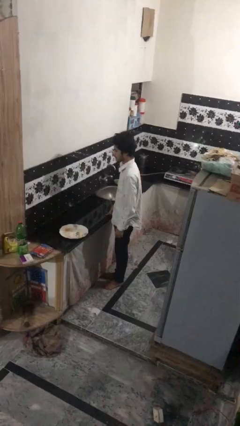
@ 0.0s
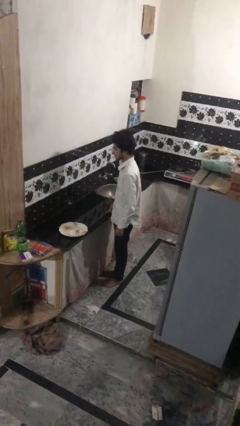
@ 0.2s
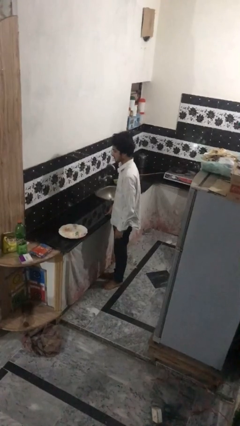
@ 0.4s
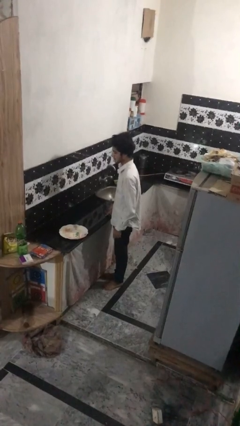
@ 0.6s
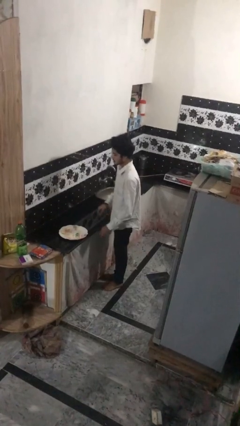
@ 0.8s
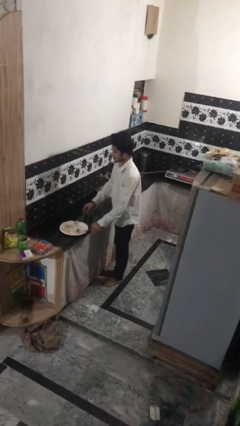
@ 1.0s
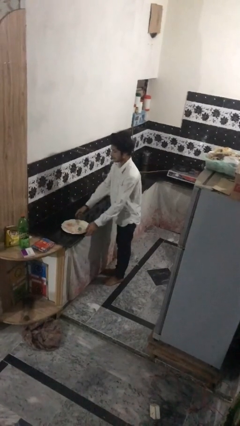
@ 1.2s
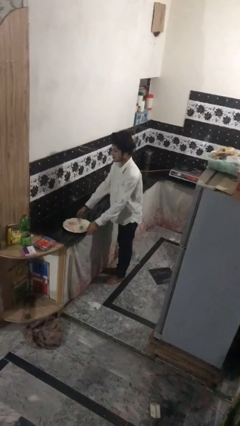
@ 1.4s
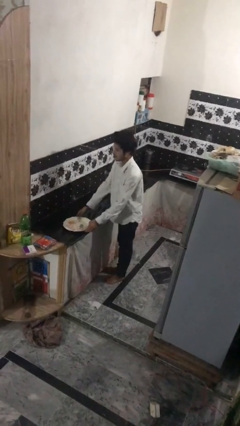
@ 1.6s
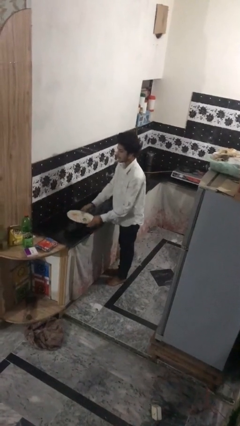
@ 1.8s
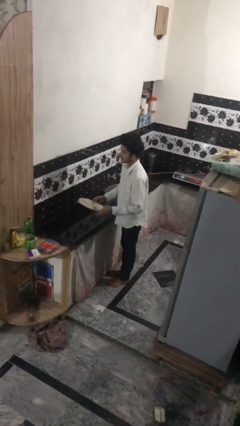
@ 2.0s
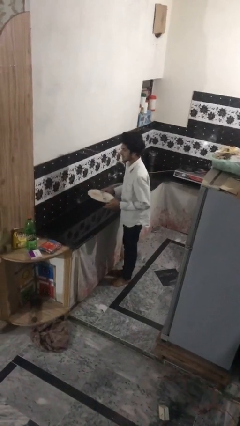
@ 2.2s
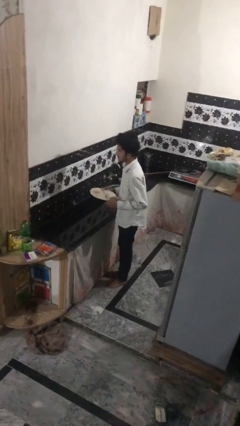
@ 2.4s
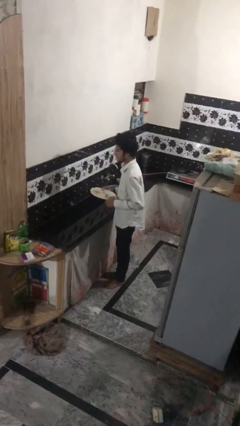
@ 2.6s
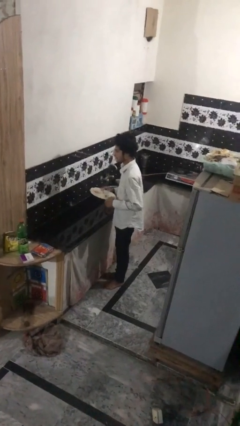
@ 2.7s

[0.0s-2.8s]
person picks up object from countertop

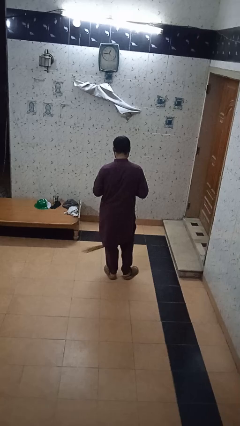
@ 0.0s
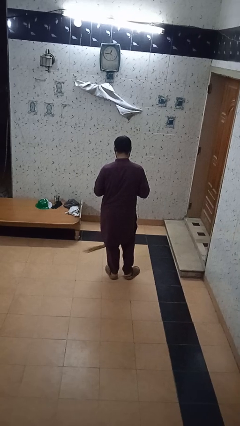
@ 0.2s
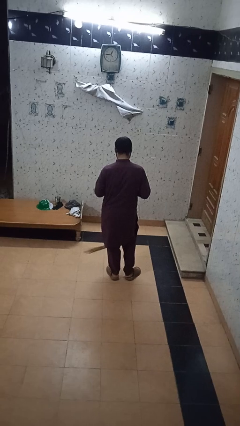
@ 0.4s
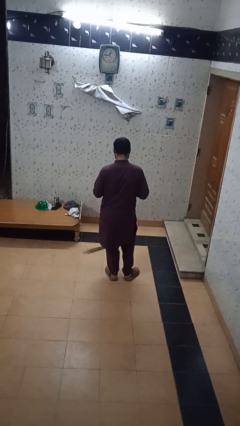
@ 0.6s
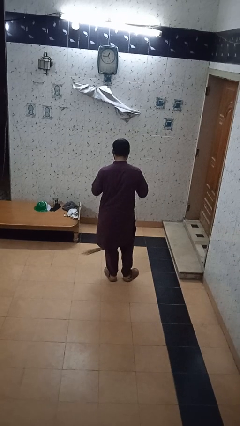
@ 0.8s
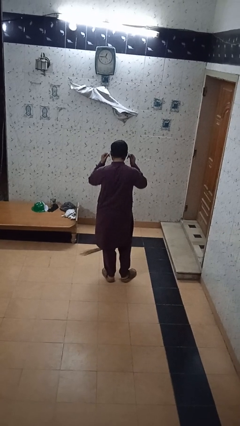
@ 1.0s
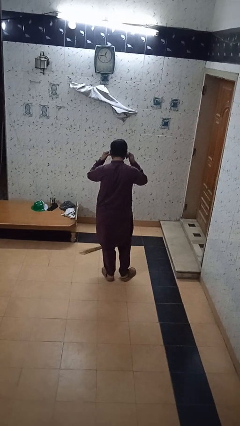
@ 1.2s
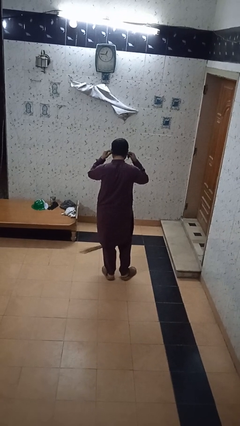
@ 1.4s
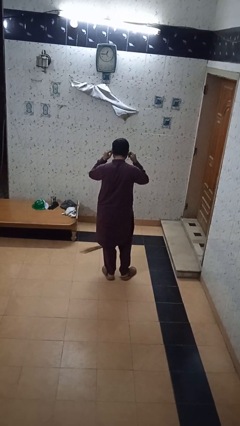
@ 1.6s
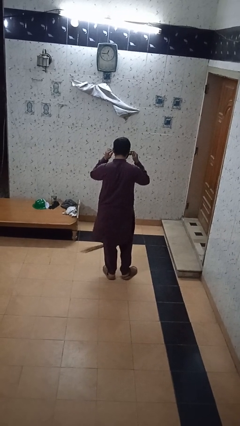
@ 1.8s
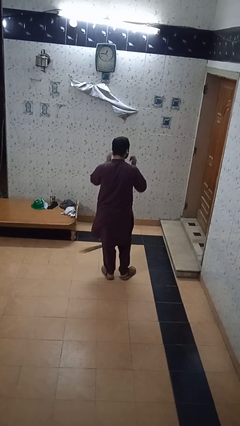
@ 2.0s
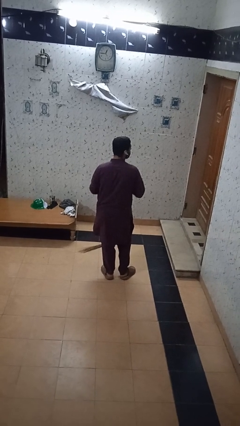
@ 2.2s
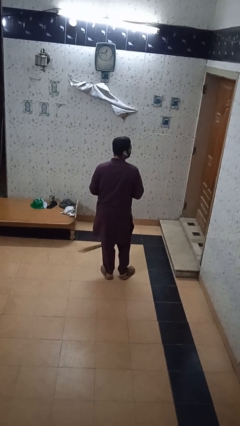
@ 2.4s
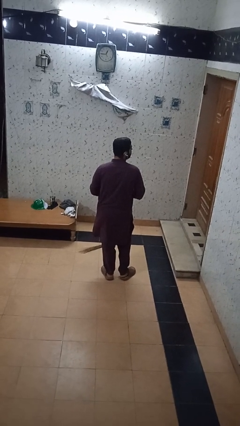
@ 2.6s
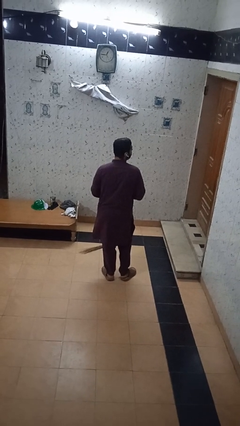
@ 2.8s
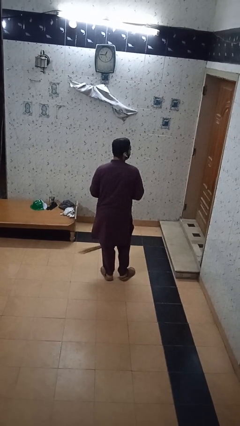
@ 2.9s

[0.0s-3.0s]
person puts on headphones

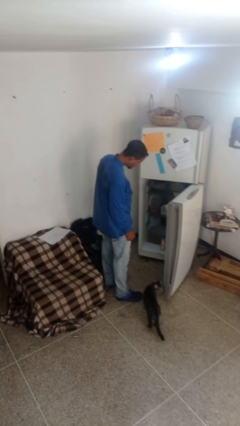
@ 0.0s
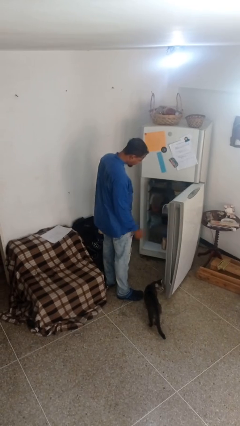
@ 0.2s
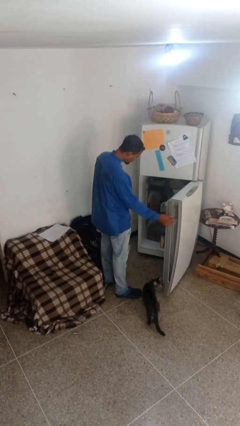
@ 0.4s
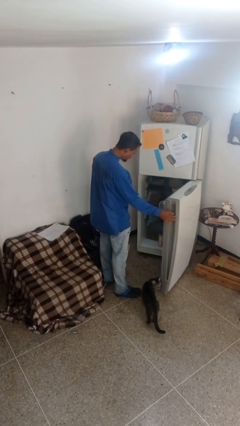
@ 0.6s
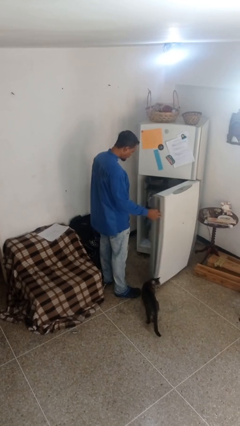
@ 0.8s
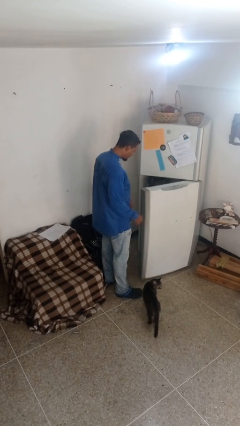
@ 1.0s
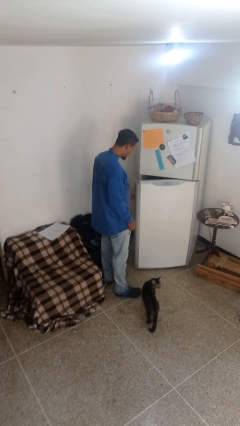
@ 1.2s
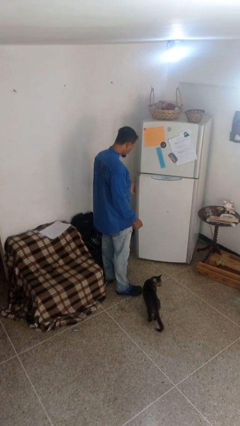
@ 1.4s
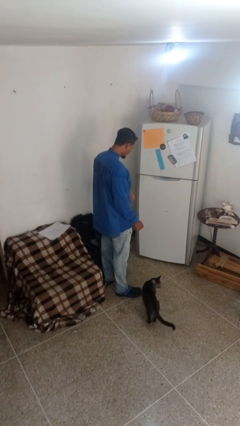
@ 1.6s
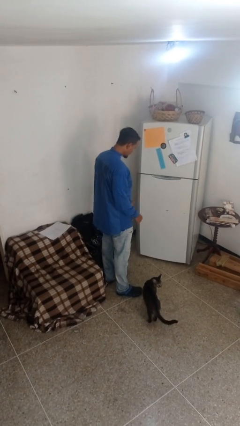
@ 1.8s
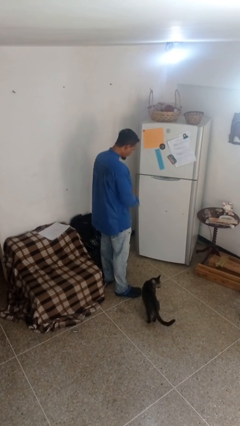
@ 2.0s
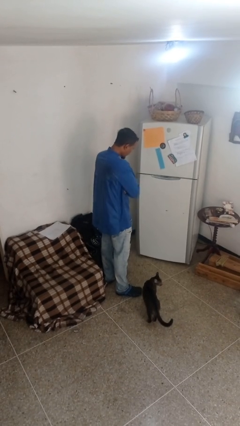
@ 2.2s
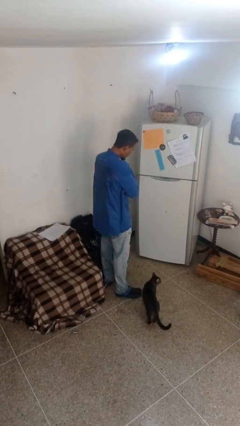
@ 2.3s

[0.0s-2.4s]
person closes refrigerator

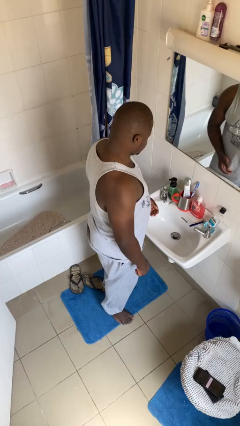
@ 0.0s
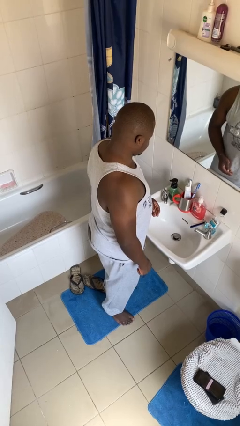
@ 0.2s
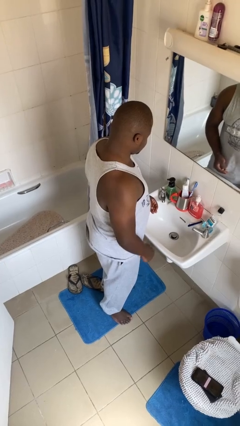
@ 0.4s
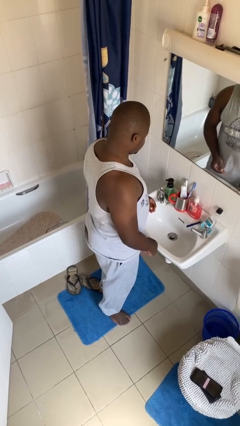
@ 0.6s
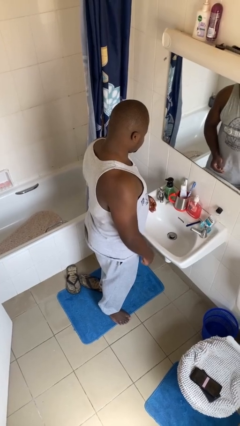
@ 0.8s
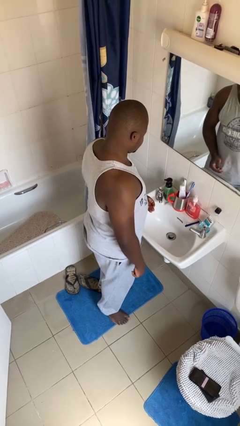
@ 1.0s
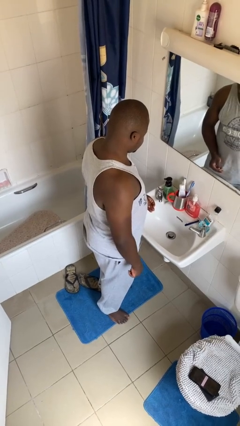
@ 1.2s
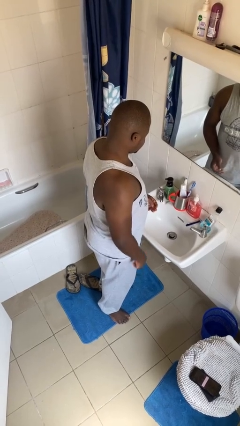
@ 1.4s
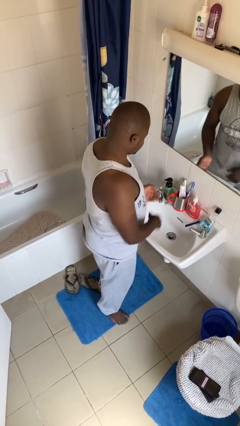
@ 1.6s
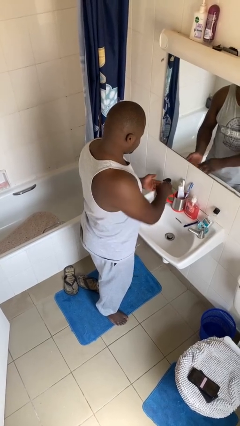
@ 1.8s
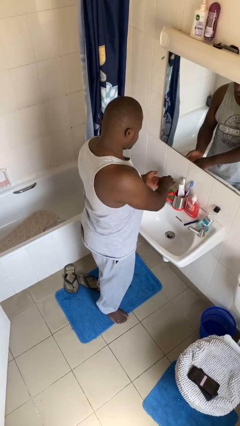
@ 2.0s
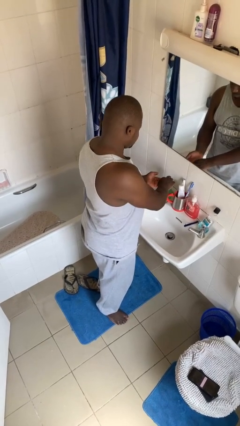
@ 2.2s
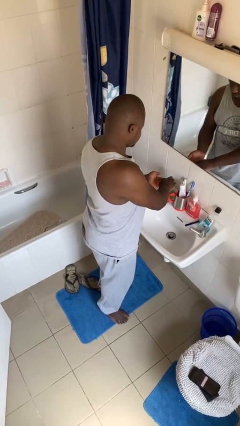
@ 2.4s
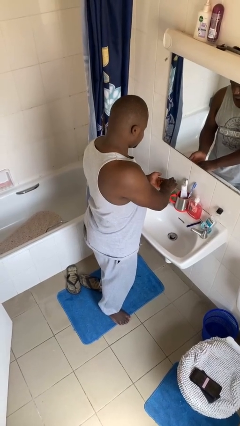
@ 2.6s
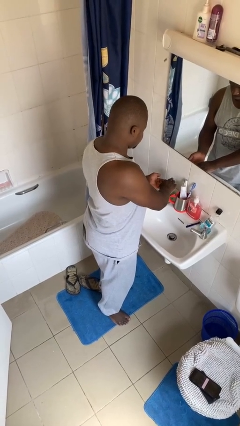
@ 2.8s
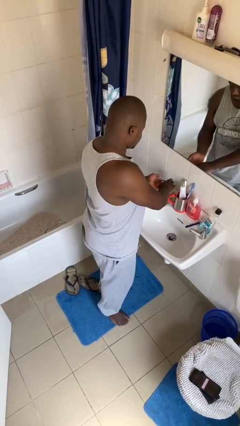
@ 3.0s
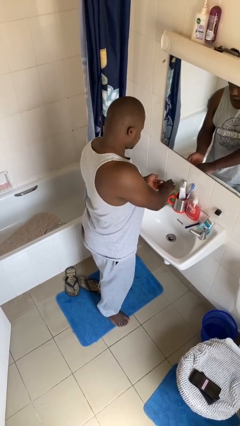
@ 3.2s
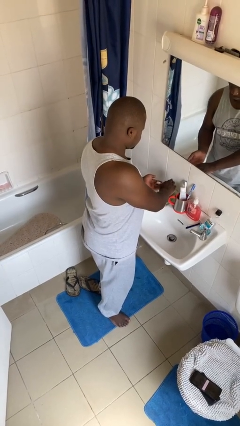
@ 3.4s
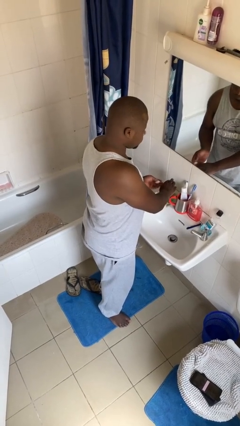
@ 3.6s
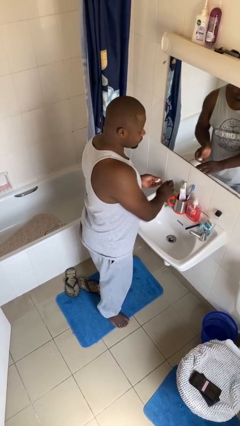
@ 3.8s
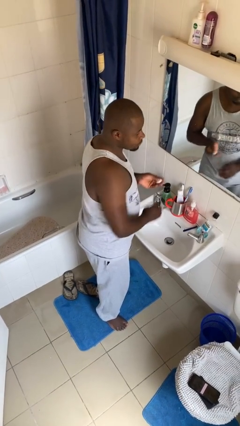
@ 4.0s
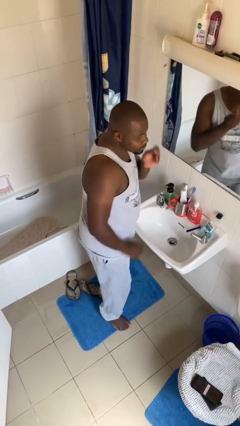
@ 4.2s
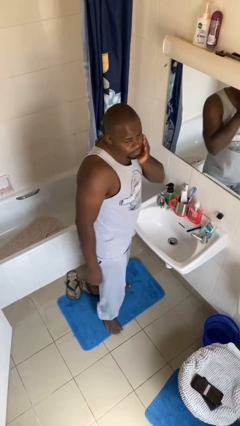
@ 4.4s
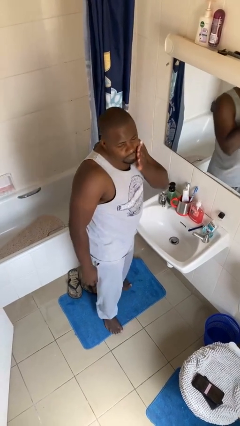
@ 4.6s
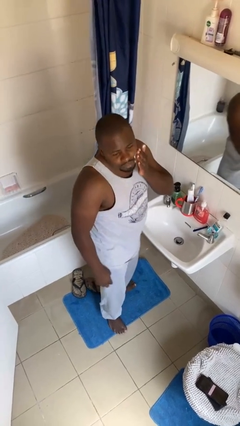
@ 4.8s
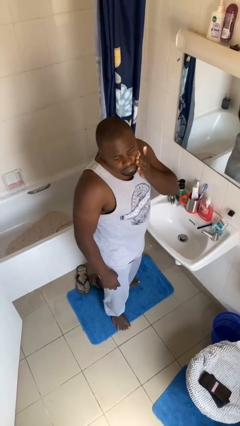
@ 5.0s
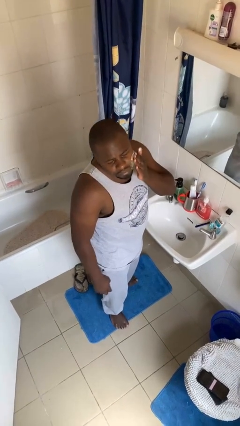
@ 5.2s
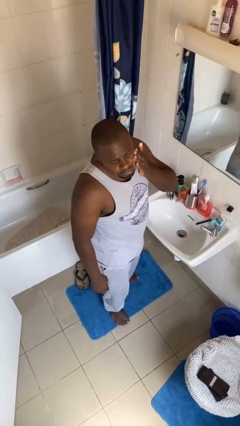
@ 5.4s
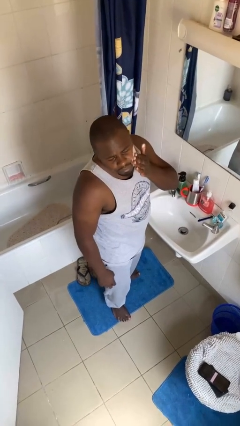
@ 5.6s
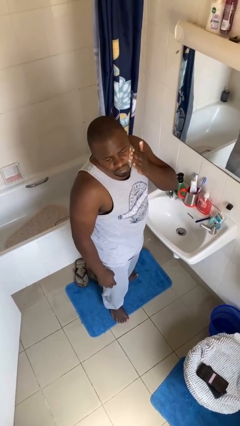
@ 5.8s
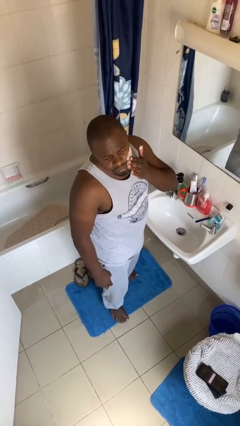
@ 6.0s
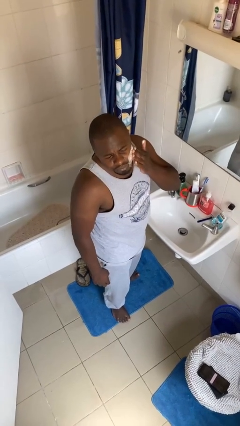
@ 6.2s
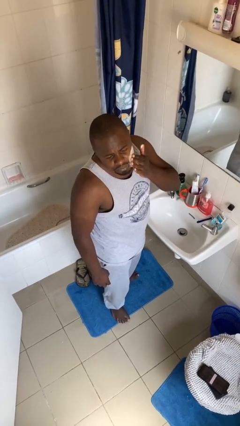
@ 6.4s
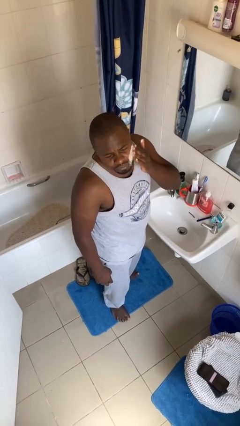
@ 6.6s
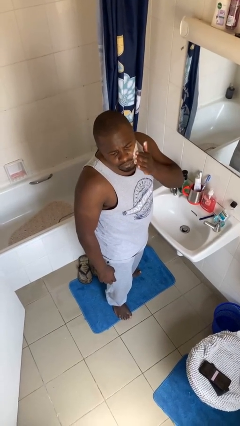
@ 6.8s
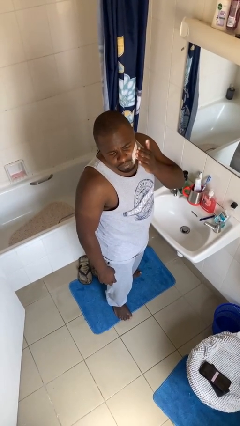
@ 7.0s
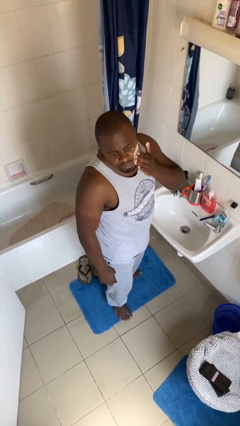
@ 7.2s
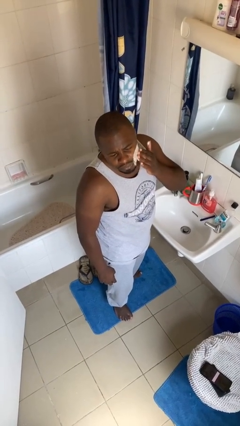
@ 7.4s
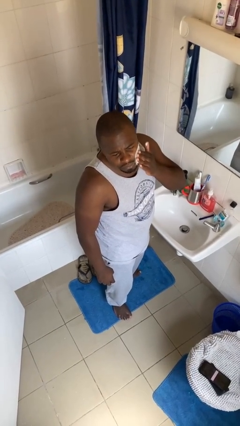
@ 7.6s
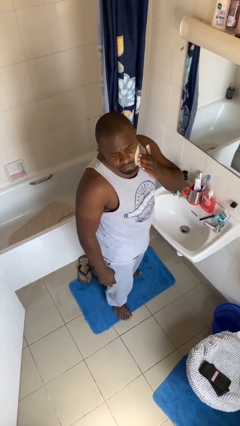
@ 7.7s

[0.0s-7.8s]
person applies shaving cream

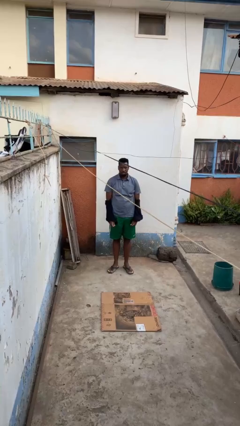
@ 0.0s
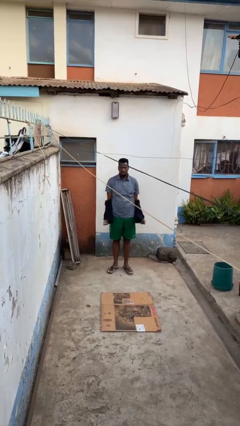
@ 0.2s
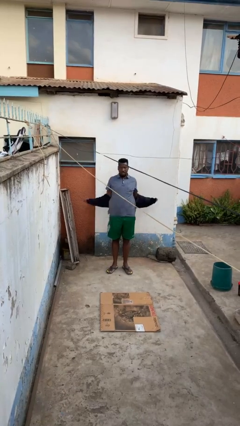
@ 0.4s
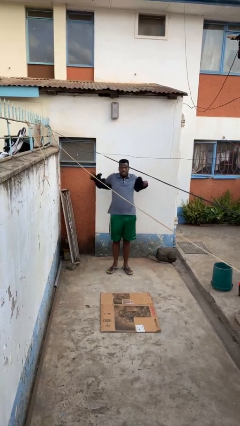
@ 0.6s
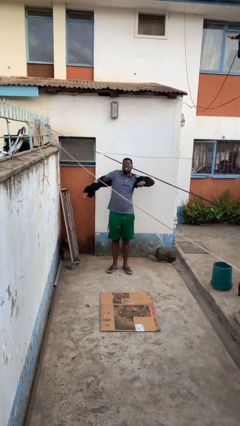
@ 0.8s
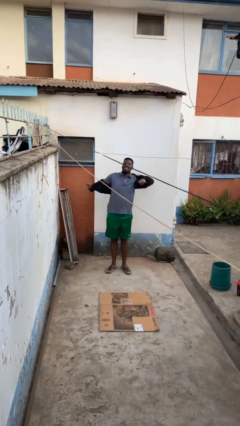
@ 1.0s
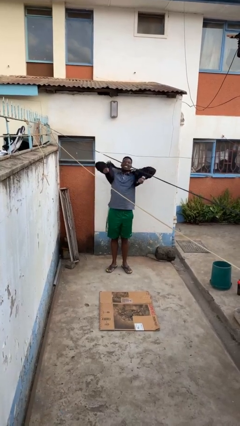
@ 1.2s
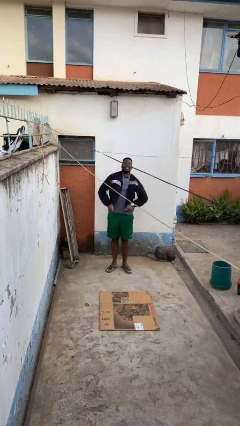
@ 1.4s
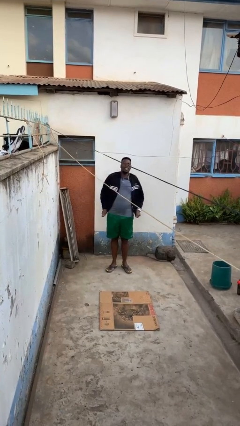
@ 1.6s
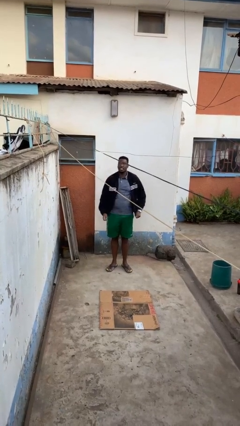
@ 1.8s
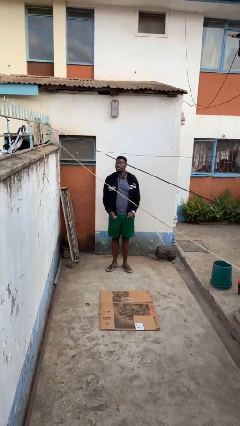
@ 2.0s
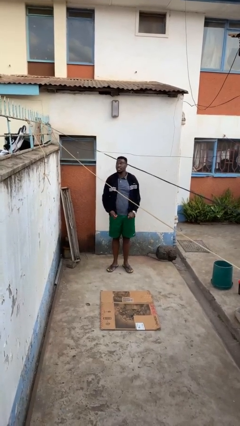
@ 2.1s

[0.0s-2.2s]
person puts on jacket
